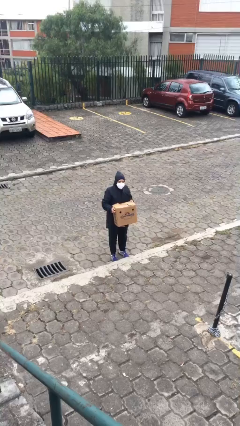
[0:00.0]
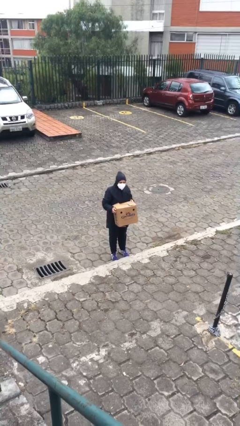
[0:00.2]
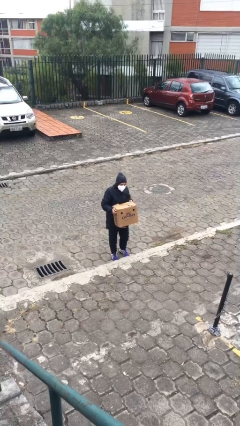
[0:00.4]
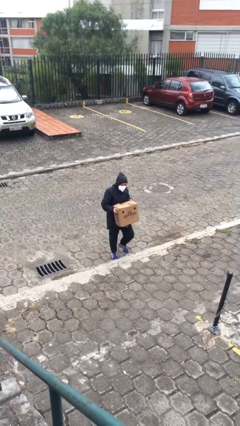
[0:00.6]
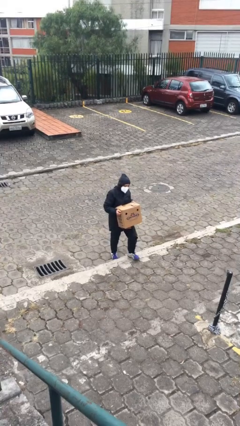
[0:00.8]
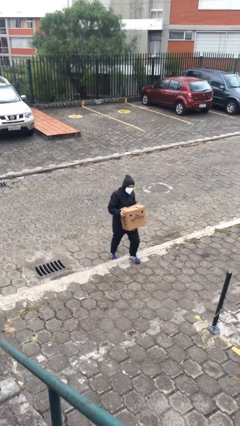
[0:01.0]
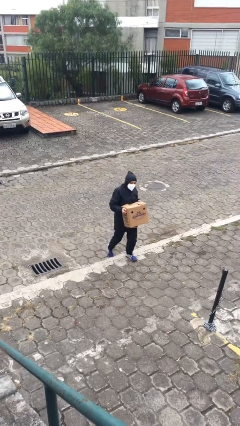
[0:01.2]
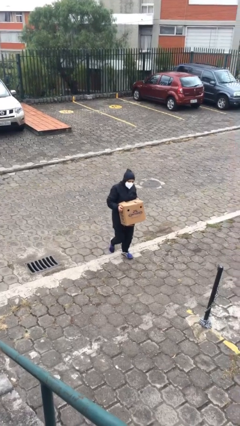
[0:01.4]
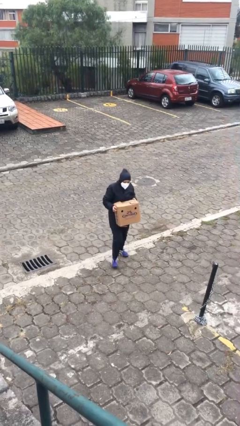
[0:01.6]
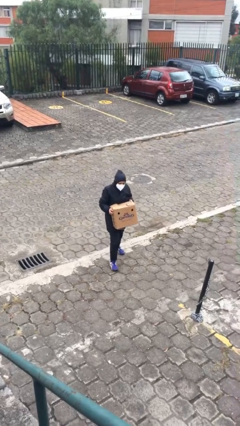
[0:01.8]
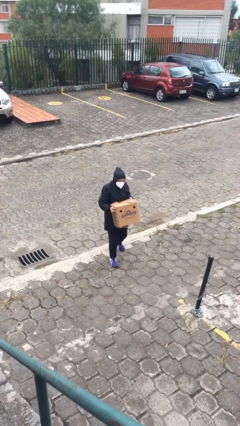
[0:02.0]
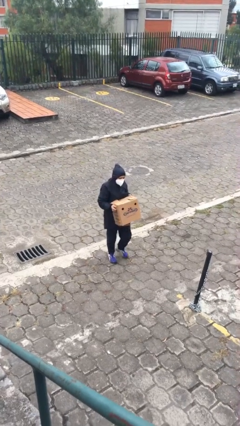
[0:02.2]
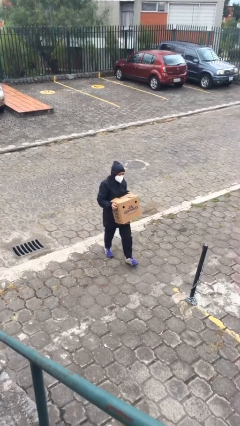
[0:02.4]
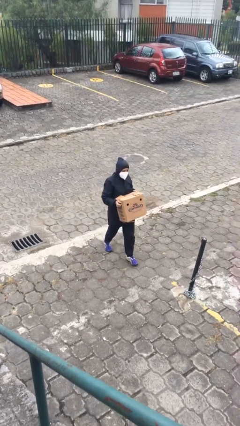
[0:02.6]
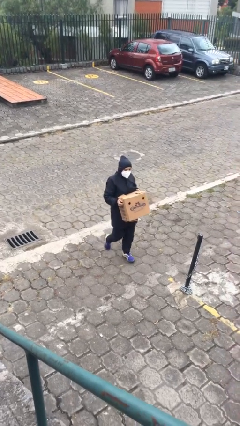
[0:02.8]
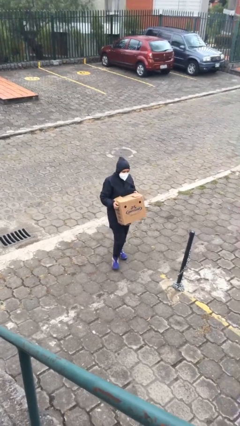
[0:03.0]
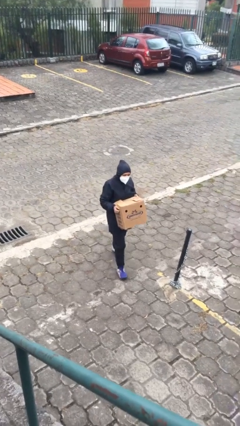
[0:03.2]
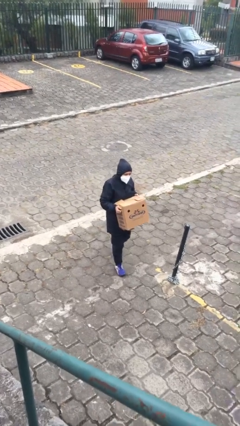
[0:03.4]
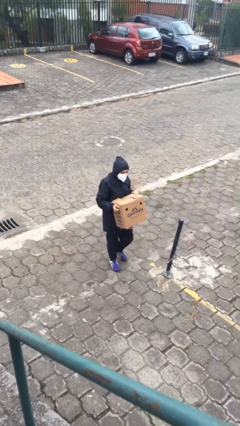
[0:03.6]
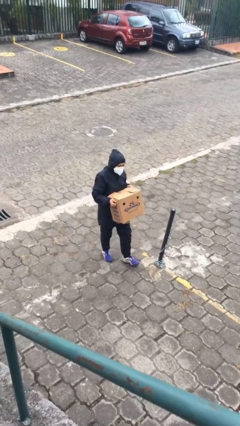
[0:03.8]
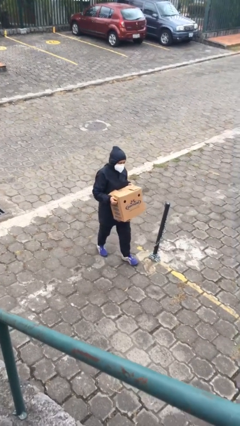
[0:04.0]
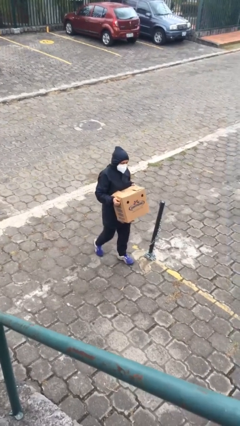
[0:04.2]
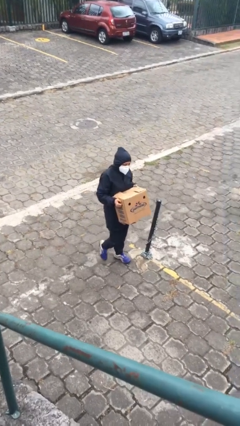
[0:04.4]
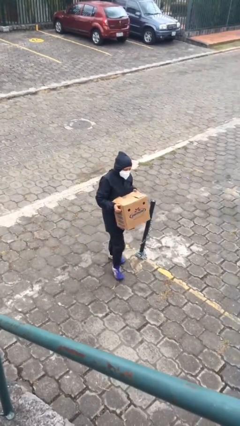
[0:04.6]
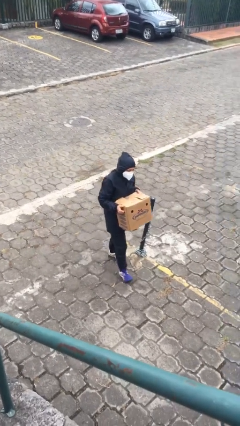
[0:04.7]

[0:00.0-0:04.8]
person carries heavy object

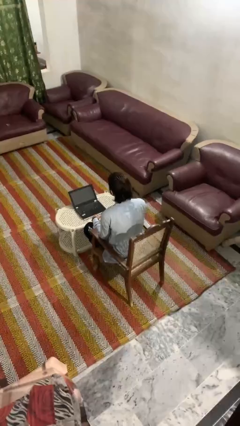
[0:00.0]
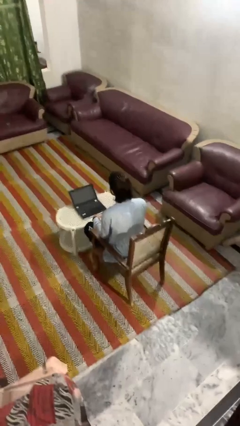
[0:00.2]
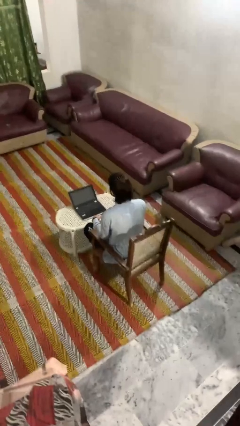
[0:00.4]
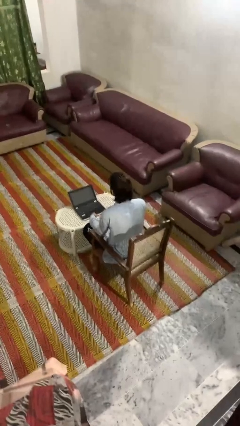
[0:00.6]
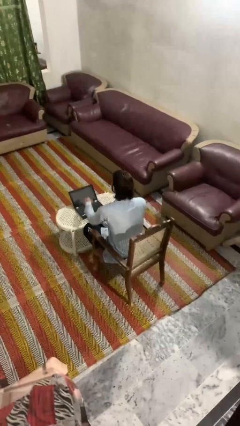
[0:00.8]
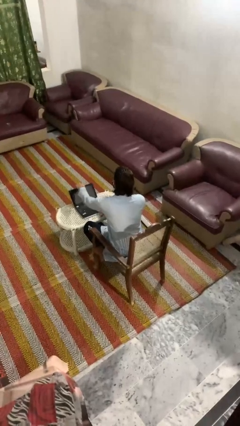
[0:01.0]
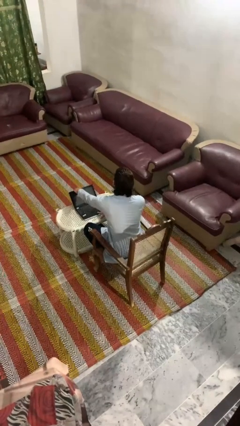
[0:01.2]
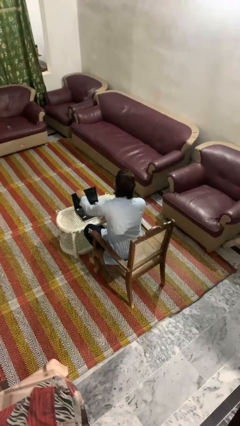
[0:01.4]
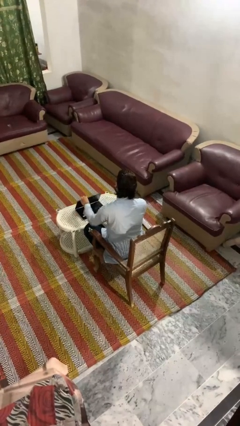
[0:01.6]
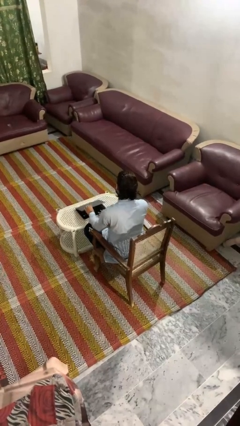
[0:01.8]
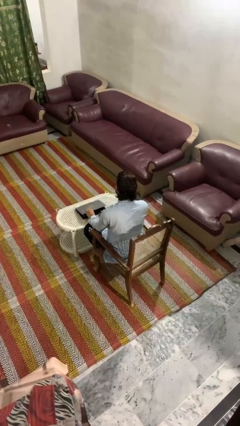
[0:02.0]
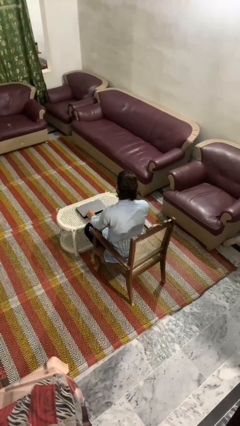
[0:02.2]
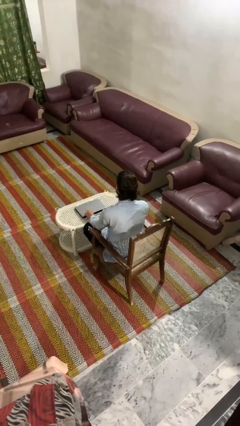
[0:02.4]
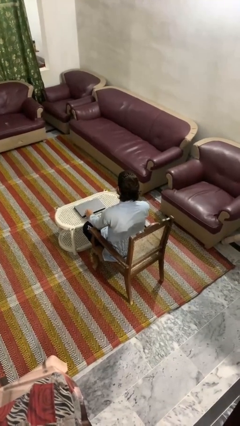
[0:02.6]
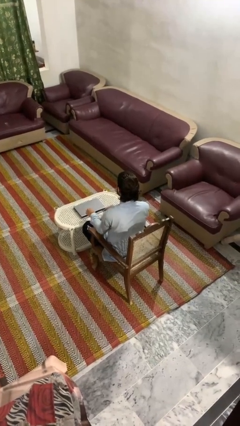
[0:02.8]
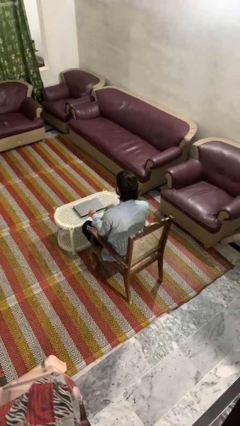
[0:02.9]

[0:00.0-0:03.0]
person closes laptop

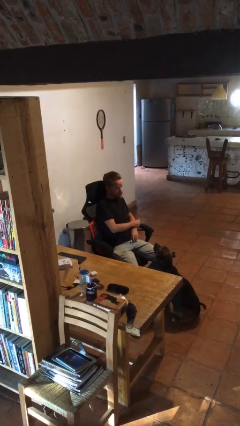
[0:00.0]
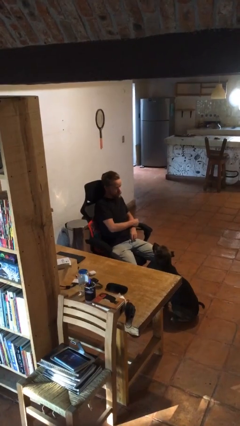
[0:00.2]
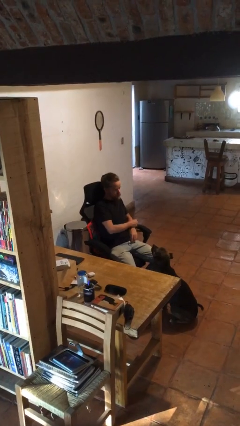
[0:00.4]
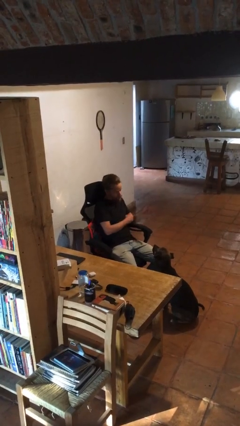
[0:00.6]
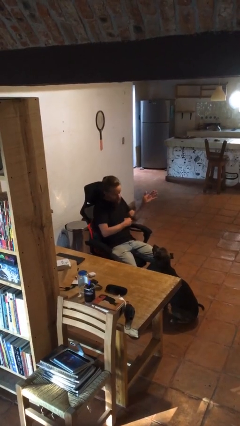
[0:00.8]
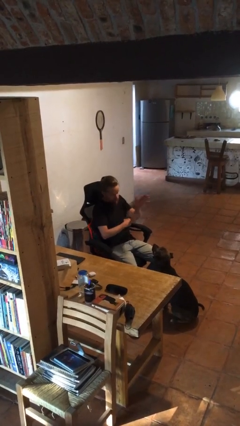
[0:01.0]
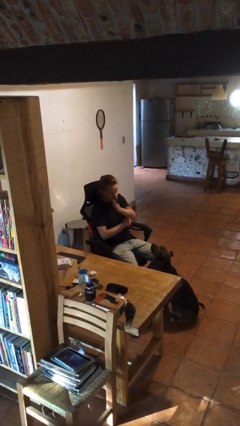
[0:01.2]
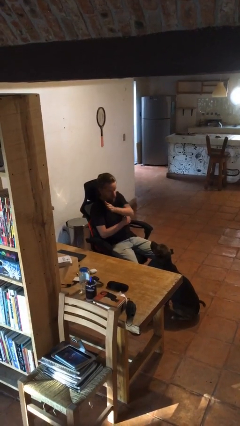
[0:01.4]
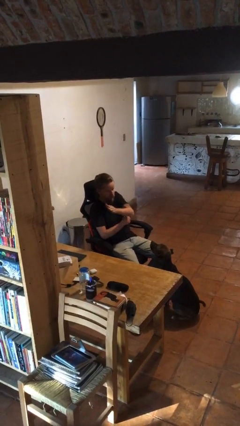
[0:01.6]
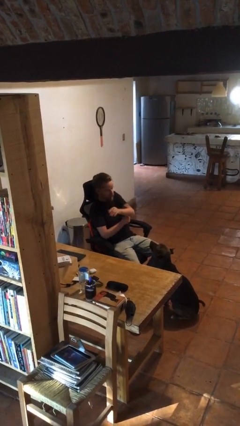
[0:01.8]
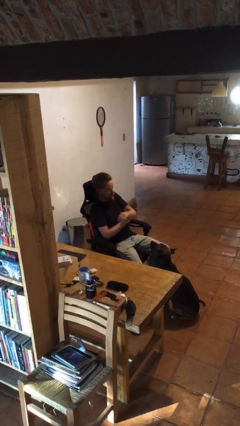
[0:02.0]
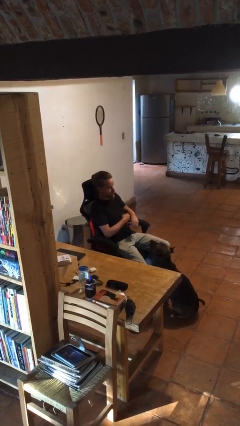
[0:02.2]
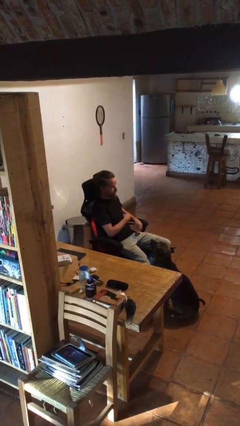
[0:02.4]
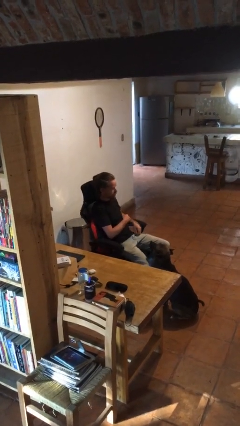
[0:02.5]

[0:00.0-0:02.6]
person gestures swipe right

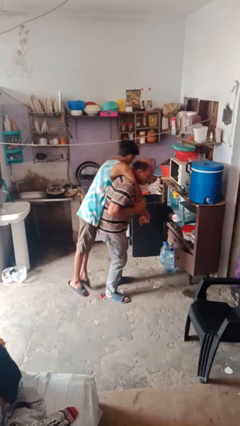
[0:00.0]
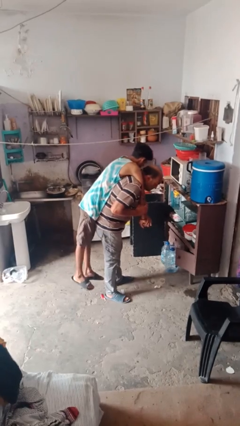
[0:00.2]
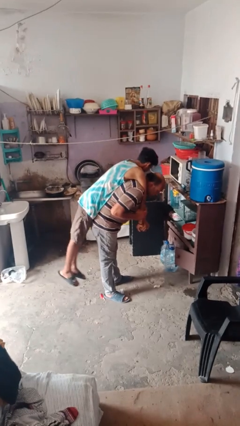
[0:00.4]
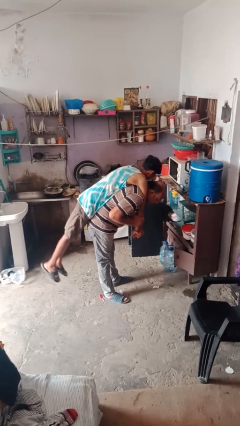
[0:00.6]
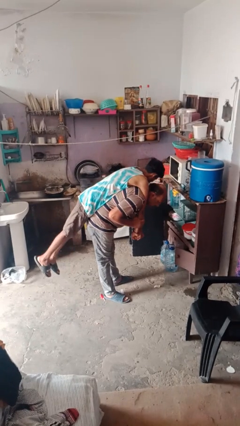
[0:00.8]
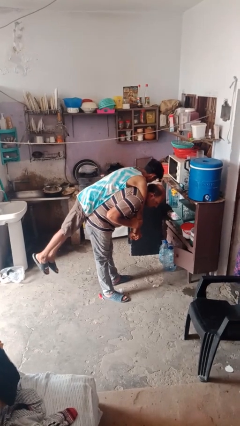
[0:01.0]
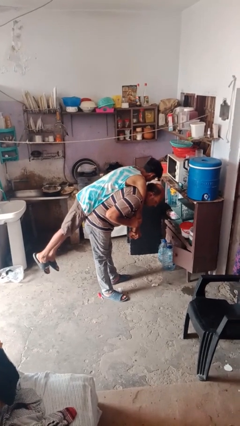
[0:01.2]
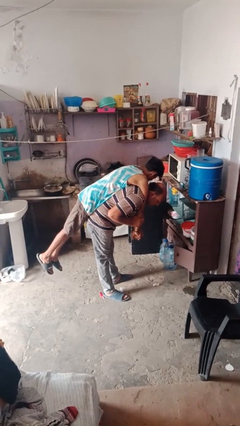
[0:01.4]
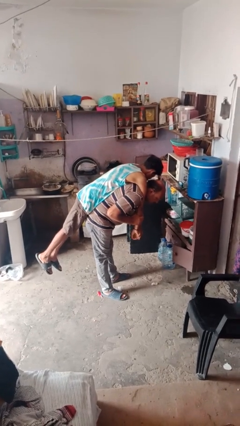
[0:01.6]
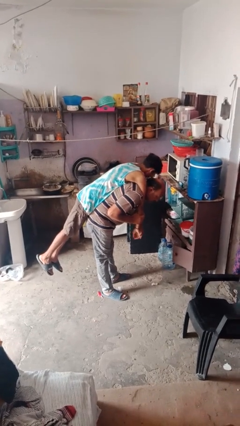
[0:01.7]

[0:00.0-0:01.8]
person carries person over shoulder

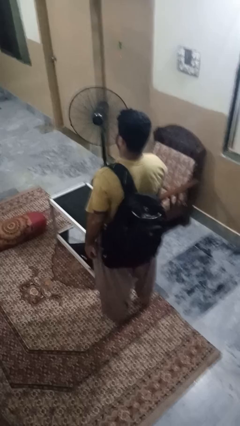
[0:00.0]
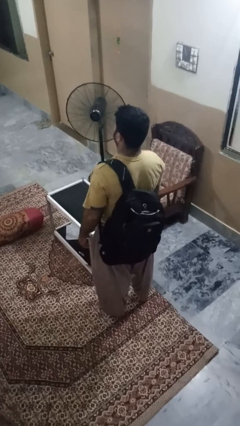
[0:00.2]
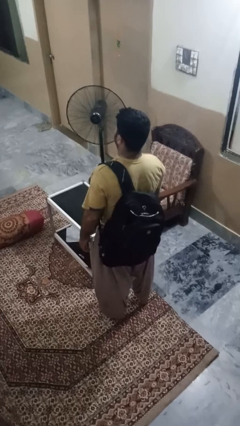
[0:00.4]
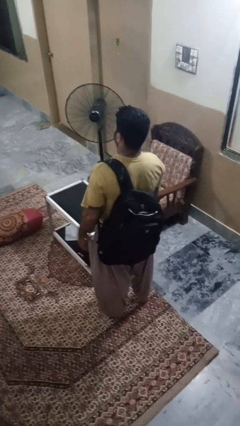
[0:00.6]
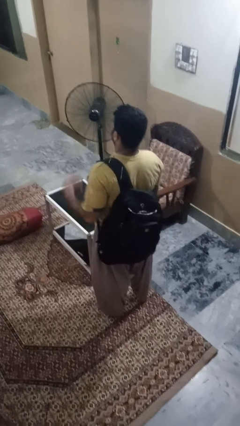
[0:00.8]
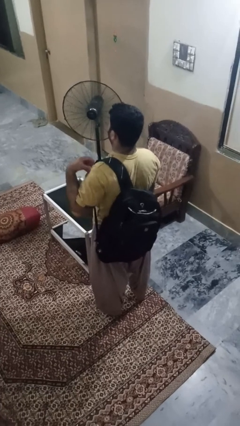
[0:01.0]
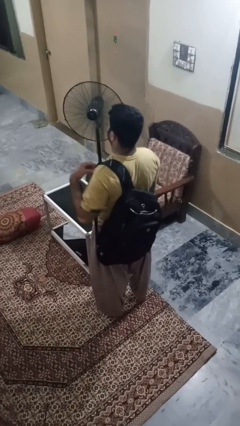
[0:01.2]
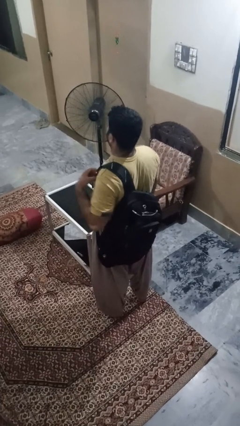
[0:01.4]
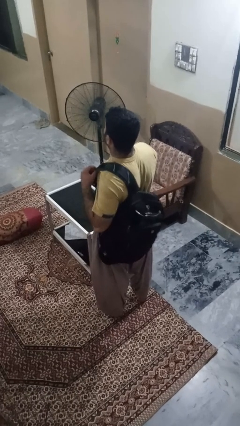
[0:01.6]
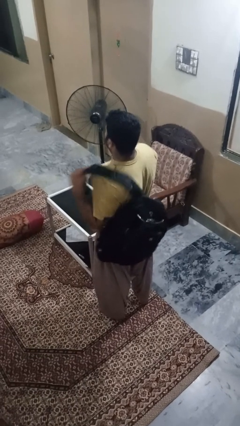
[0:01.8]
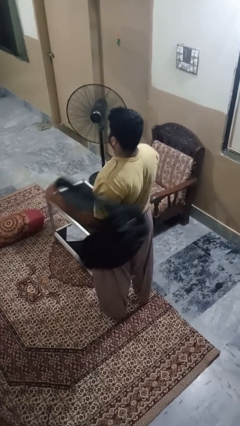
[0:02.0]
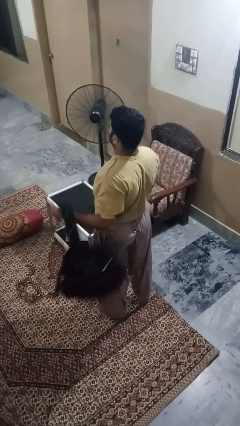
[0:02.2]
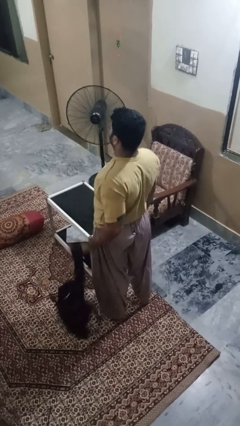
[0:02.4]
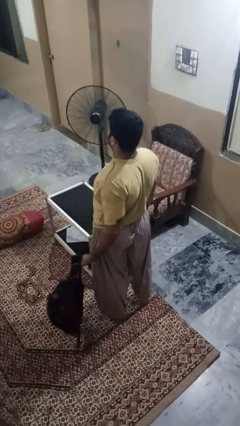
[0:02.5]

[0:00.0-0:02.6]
person takes off backpack

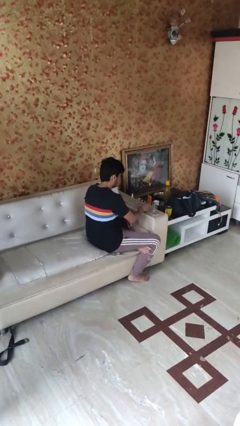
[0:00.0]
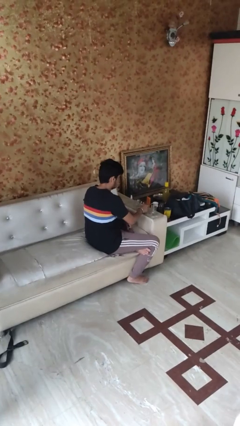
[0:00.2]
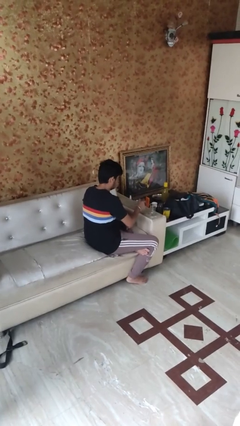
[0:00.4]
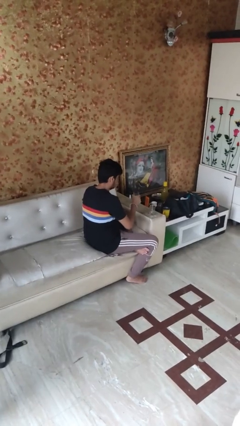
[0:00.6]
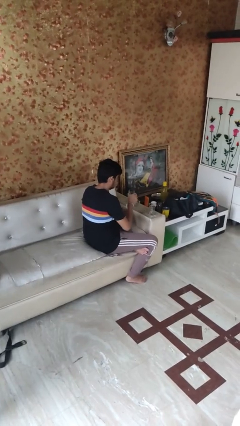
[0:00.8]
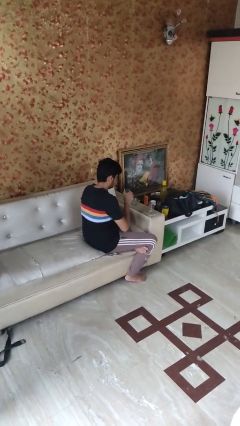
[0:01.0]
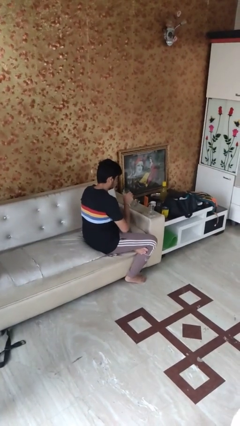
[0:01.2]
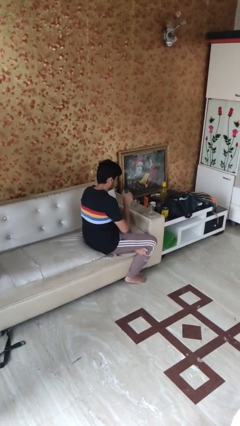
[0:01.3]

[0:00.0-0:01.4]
person picks up object from table

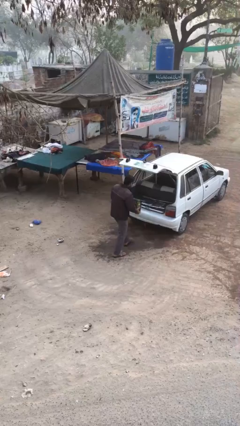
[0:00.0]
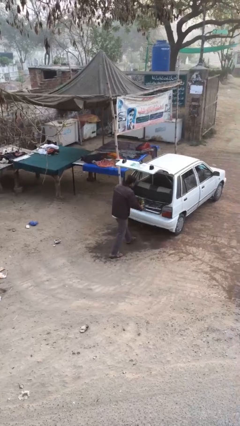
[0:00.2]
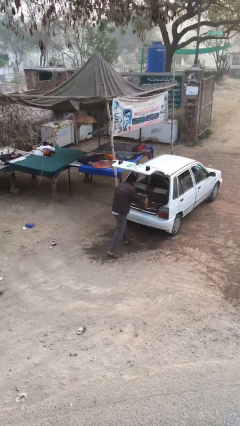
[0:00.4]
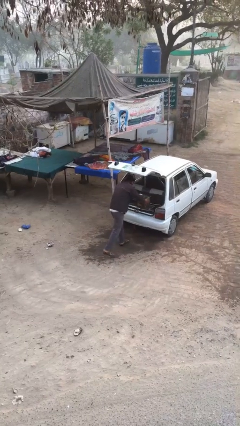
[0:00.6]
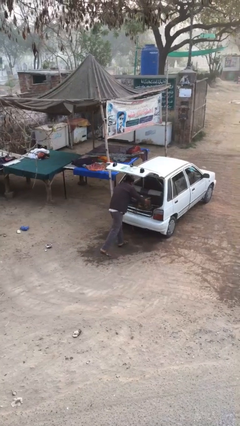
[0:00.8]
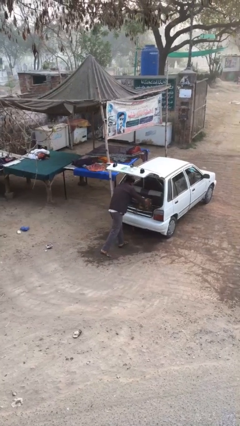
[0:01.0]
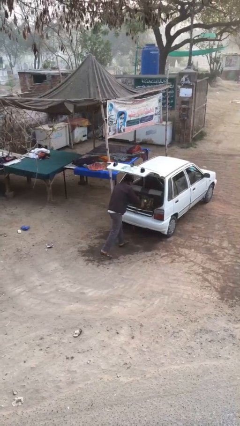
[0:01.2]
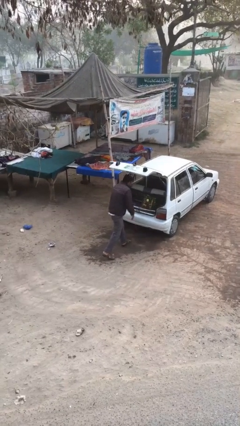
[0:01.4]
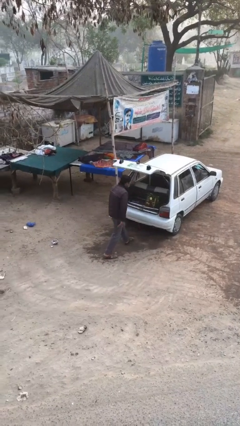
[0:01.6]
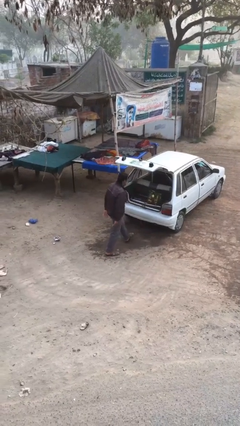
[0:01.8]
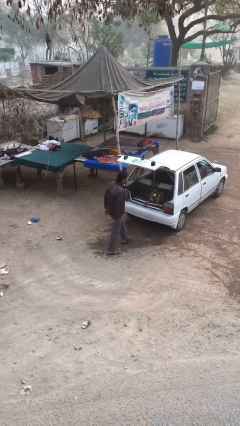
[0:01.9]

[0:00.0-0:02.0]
person loads car
